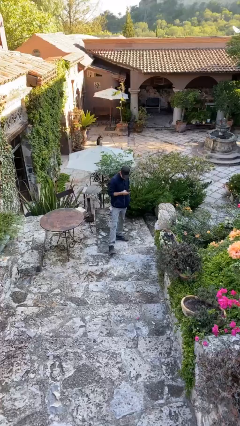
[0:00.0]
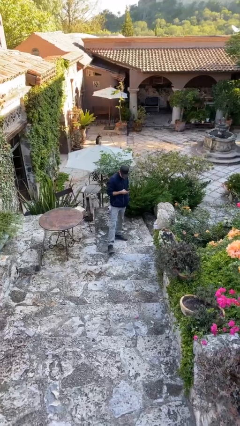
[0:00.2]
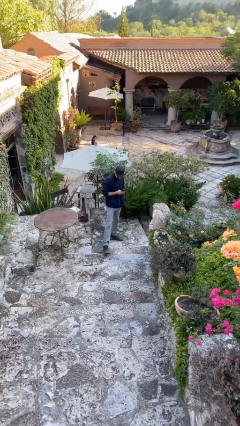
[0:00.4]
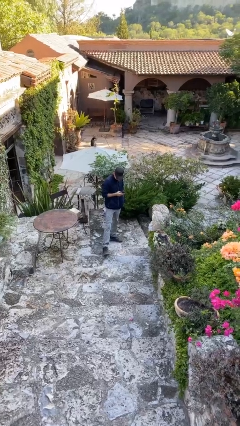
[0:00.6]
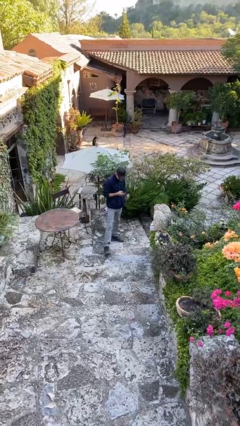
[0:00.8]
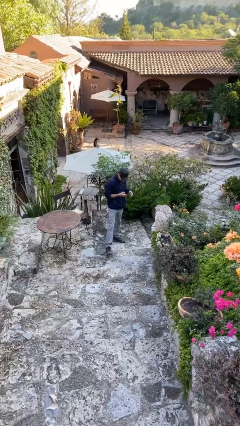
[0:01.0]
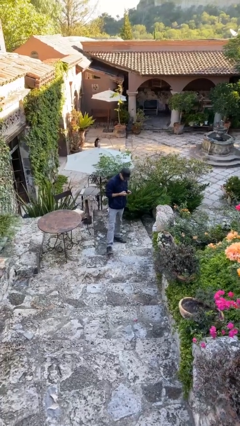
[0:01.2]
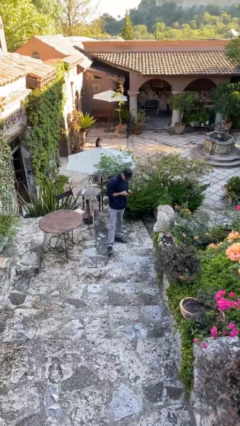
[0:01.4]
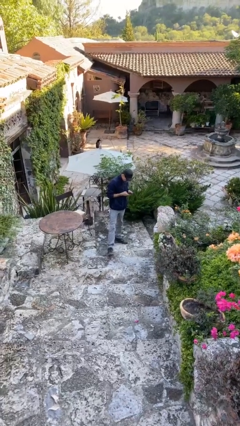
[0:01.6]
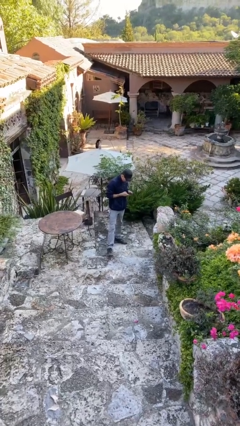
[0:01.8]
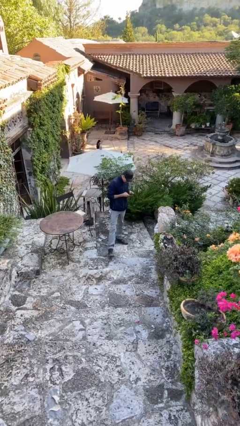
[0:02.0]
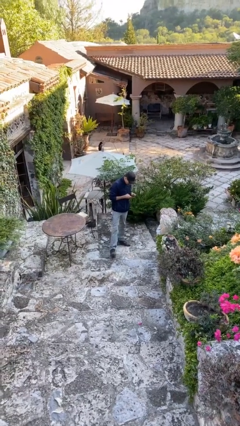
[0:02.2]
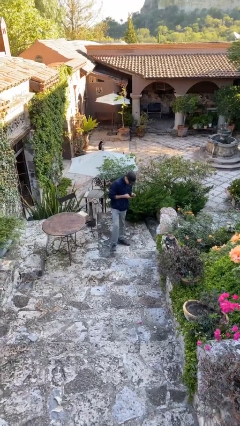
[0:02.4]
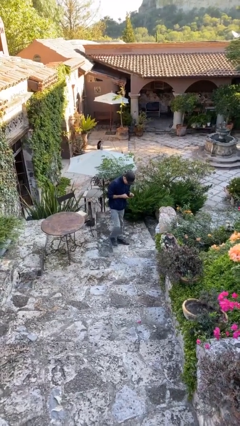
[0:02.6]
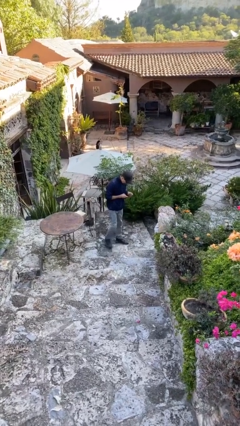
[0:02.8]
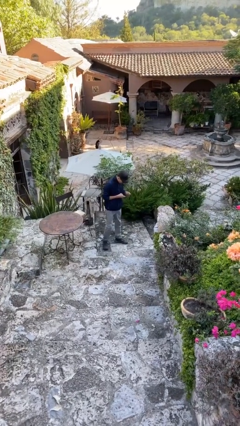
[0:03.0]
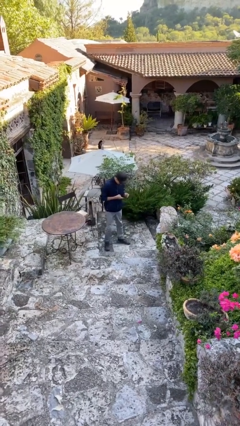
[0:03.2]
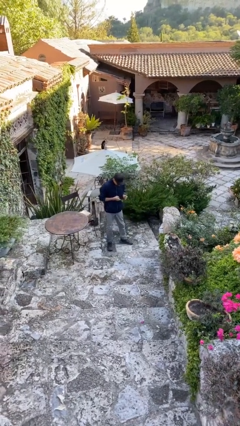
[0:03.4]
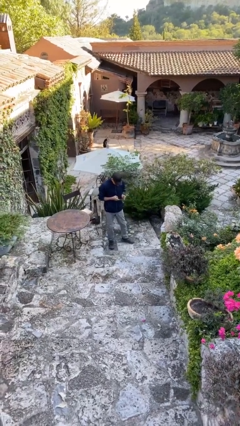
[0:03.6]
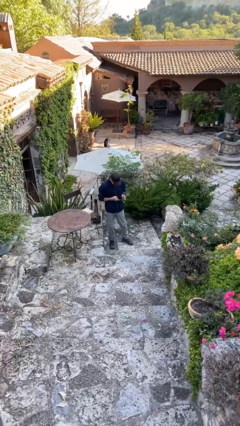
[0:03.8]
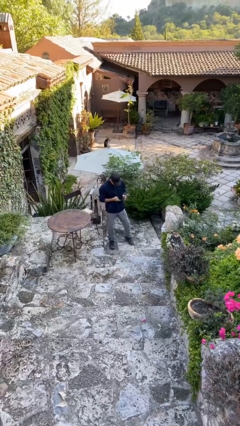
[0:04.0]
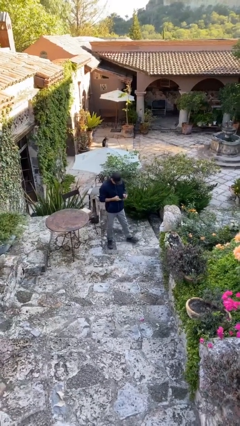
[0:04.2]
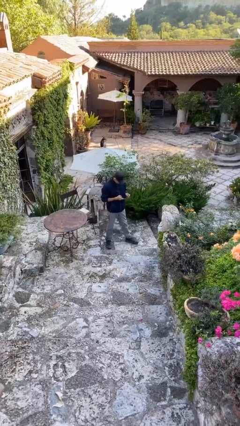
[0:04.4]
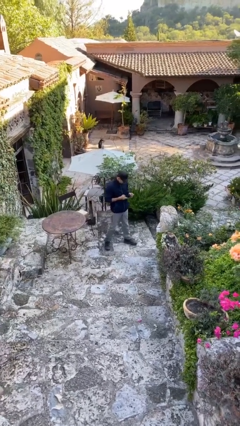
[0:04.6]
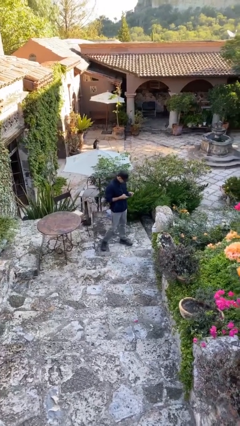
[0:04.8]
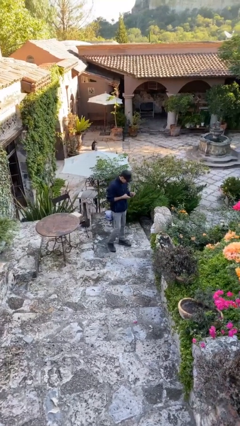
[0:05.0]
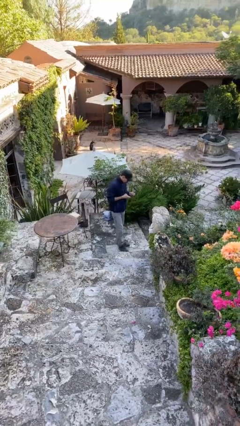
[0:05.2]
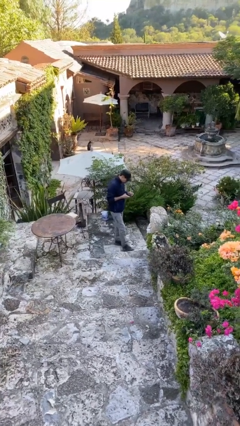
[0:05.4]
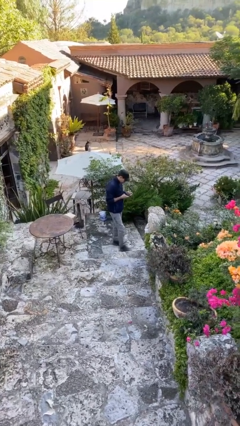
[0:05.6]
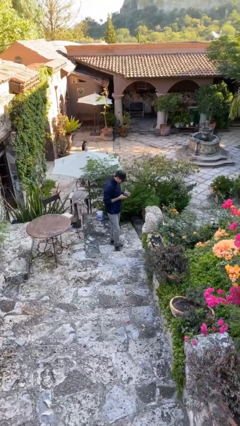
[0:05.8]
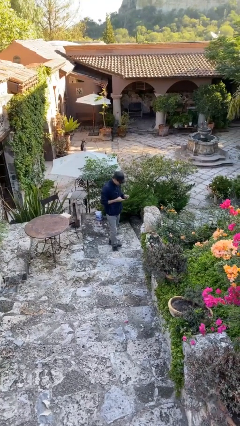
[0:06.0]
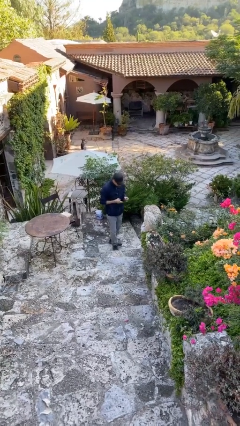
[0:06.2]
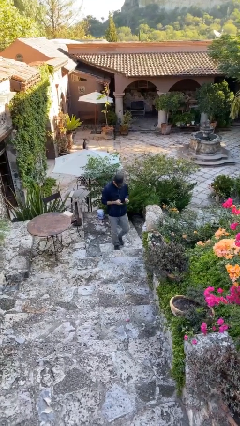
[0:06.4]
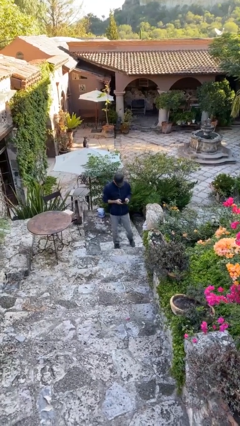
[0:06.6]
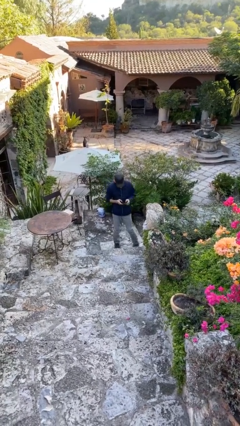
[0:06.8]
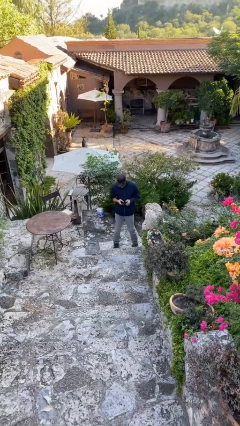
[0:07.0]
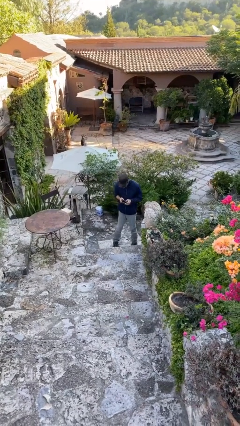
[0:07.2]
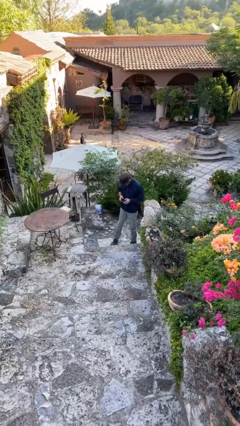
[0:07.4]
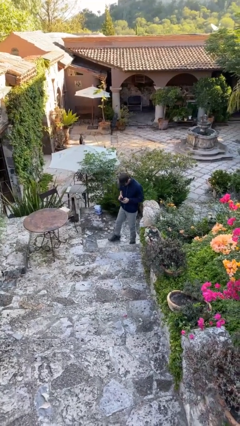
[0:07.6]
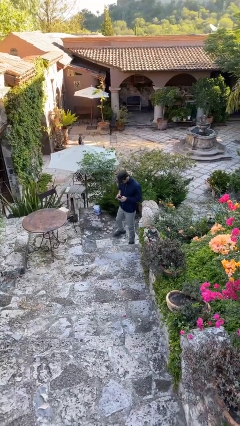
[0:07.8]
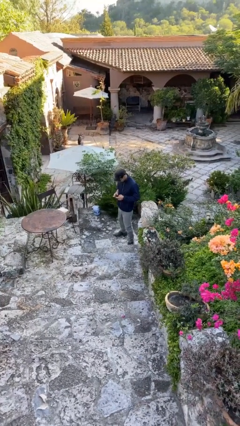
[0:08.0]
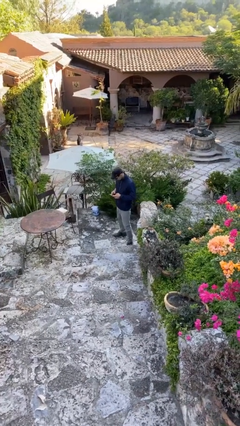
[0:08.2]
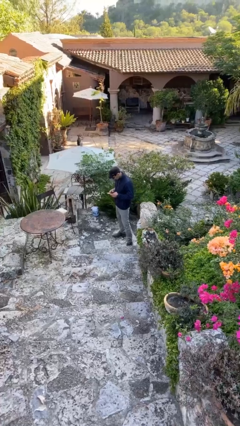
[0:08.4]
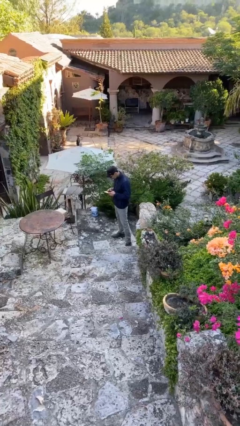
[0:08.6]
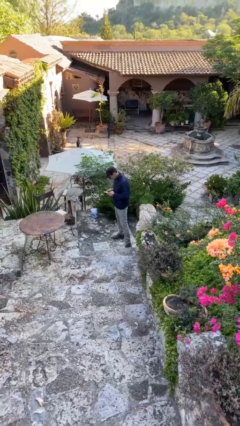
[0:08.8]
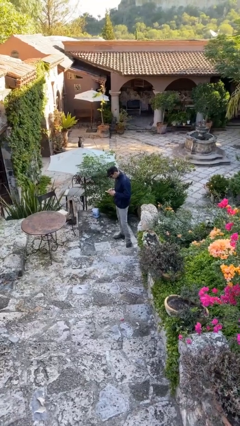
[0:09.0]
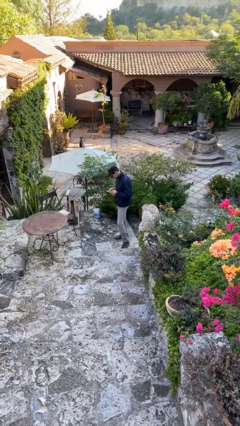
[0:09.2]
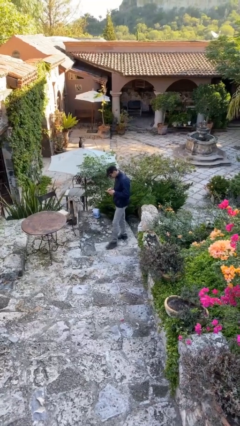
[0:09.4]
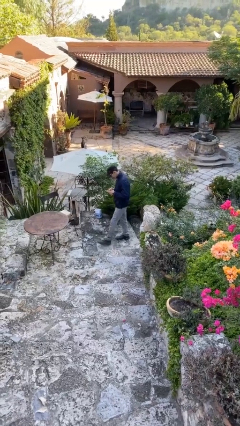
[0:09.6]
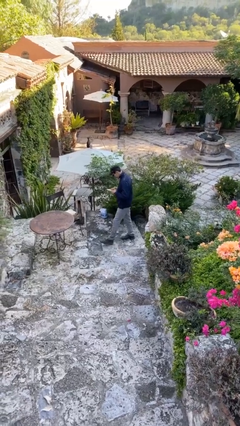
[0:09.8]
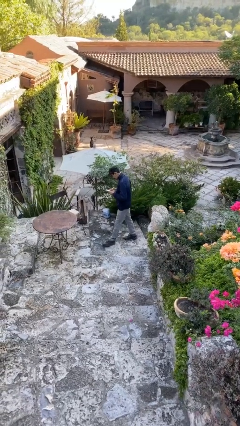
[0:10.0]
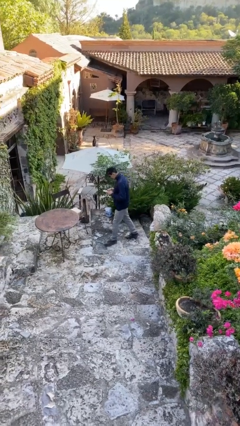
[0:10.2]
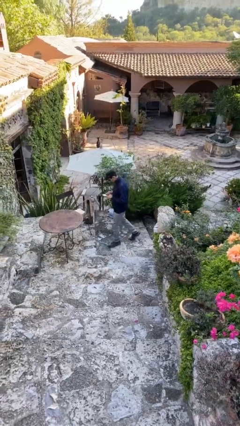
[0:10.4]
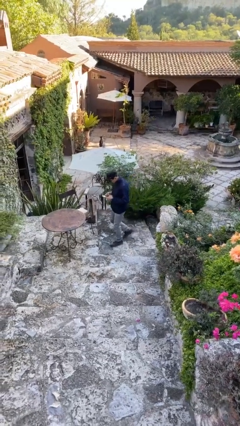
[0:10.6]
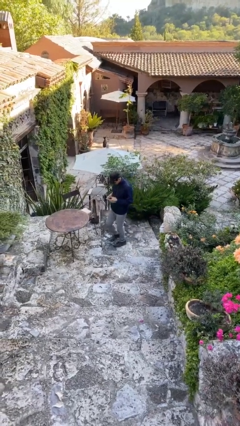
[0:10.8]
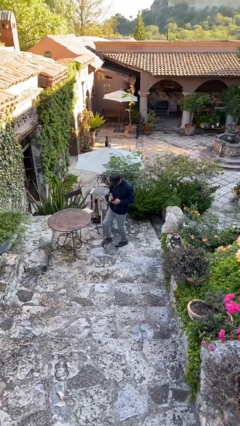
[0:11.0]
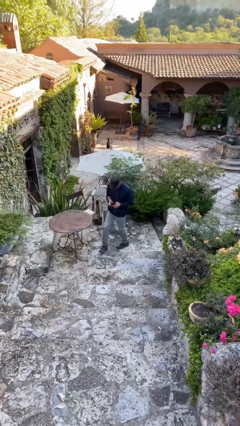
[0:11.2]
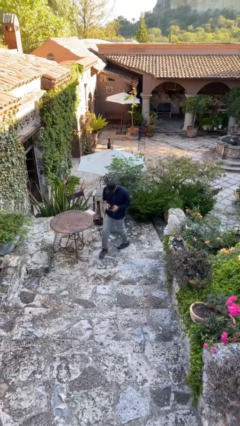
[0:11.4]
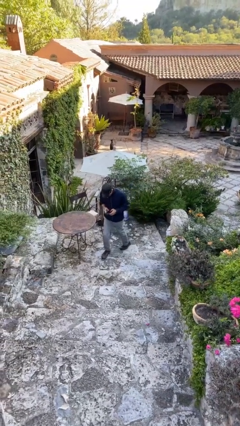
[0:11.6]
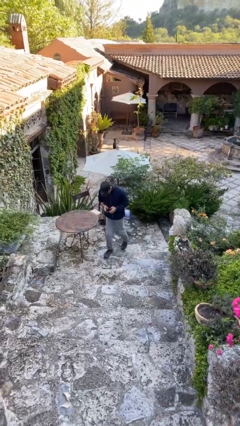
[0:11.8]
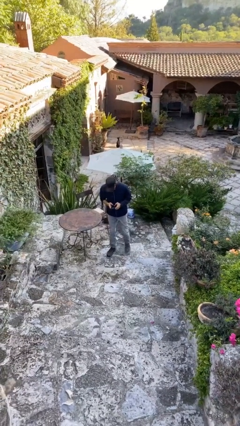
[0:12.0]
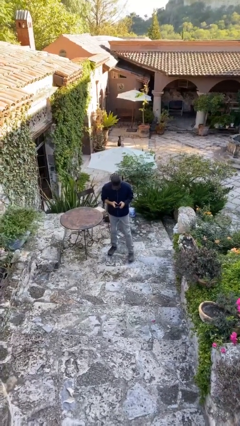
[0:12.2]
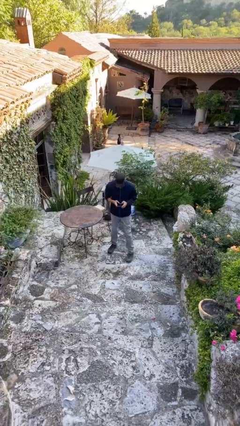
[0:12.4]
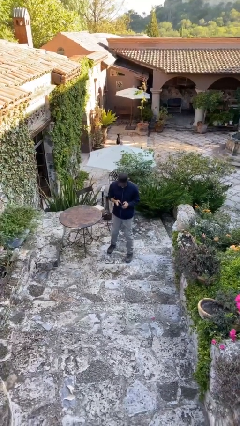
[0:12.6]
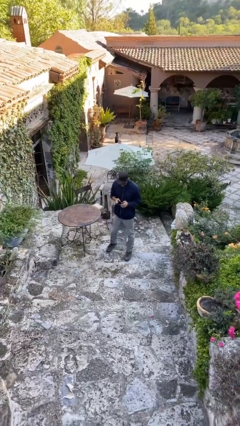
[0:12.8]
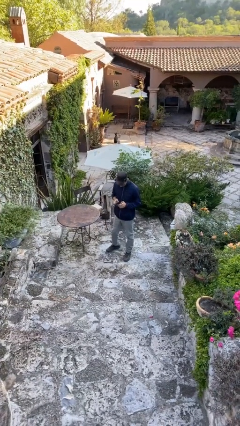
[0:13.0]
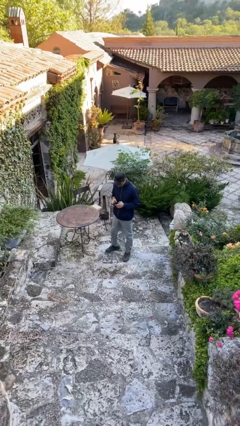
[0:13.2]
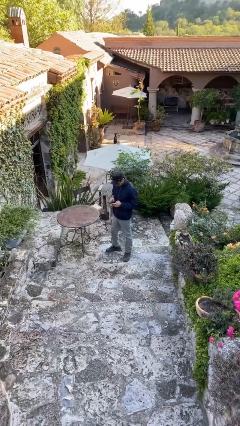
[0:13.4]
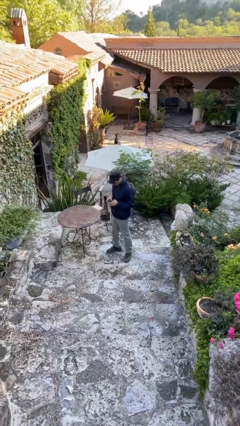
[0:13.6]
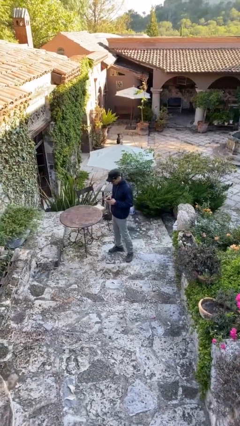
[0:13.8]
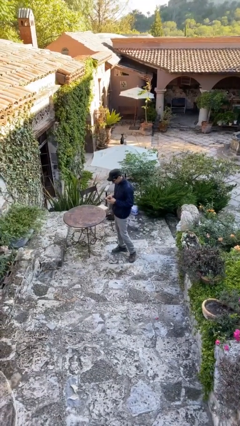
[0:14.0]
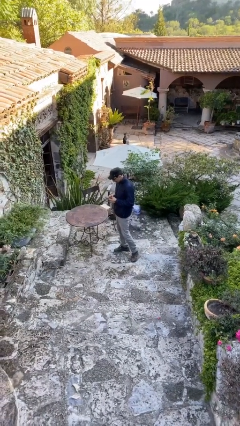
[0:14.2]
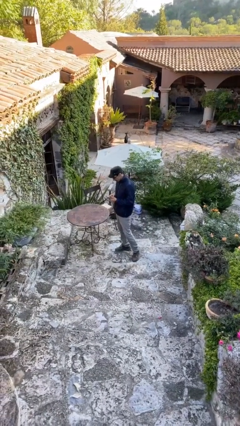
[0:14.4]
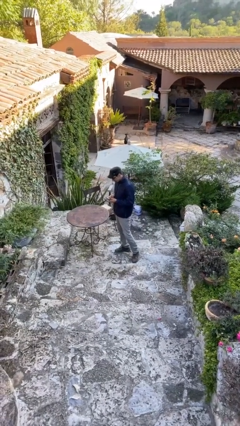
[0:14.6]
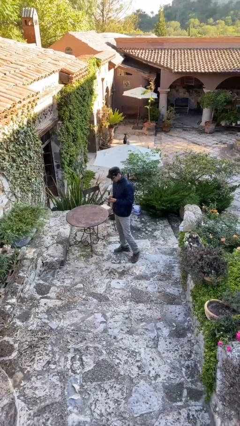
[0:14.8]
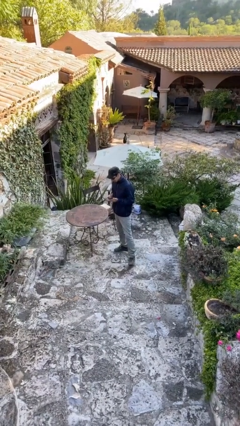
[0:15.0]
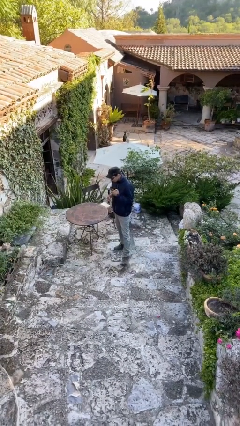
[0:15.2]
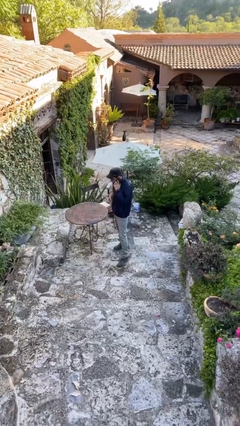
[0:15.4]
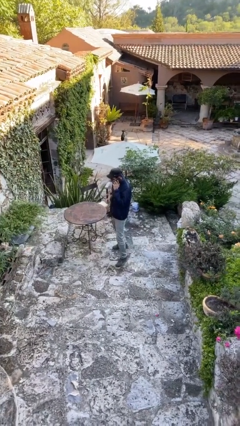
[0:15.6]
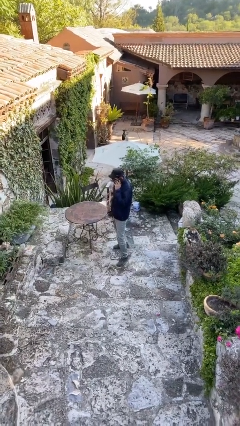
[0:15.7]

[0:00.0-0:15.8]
person texts on phone

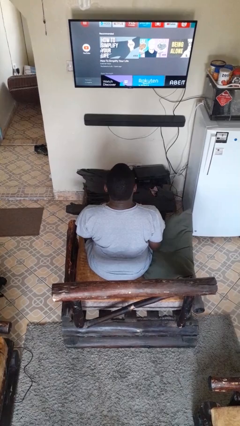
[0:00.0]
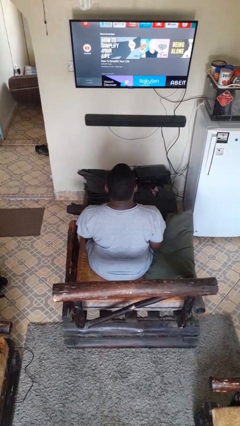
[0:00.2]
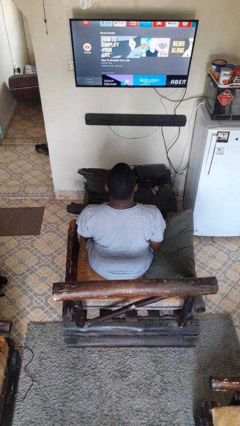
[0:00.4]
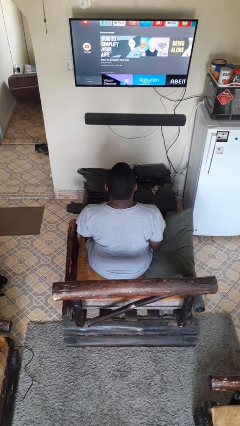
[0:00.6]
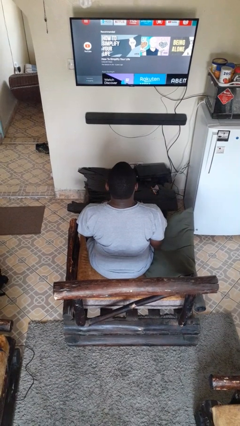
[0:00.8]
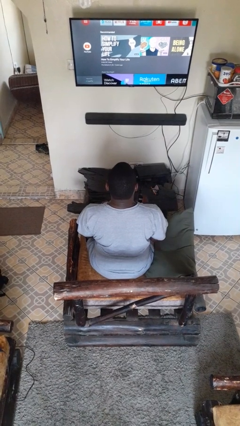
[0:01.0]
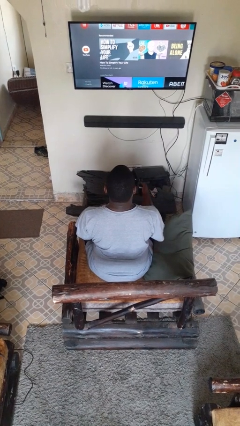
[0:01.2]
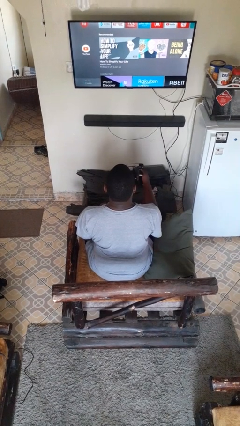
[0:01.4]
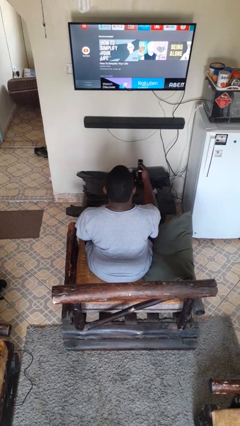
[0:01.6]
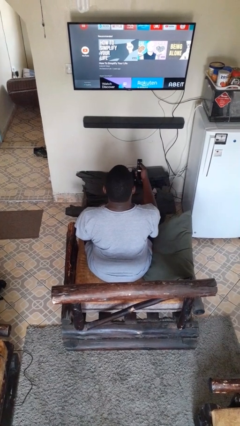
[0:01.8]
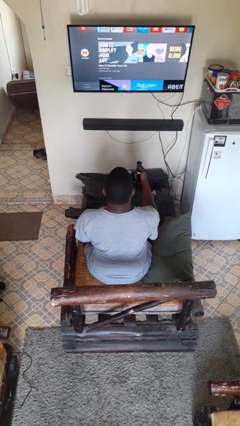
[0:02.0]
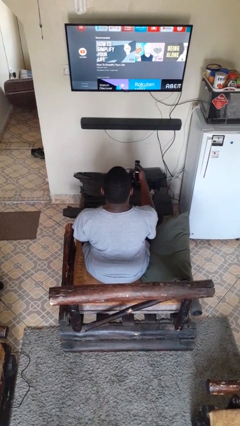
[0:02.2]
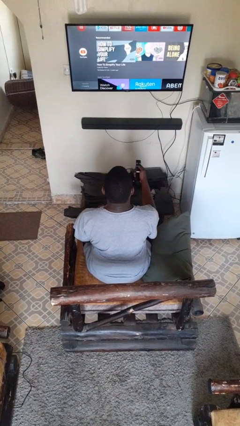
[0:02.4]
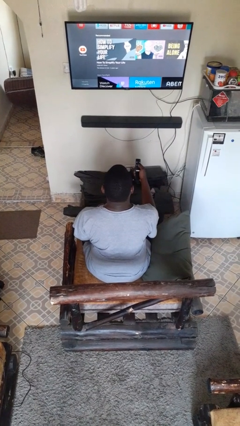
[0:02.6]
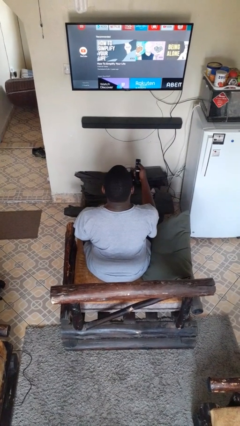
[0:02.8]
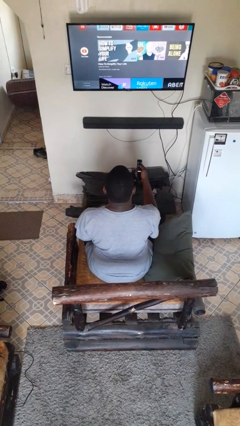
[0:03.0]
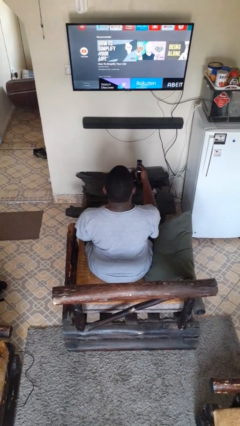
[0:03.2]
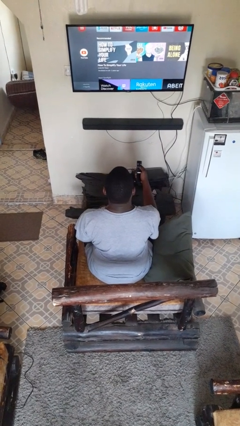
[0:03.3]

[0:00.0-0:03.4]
person uses television remote
